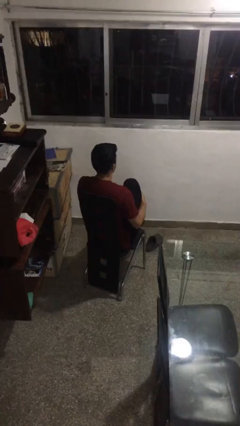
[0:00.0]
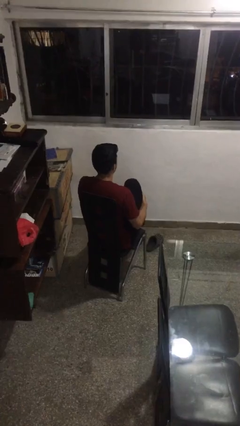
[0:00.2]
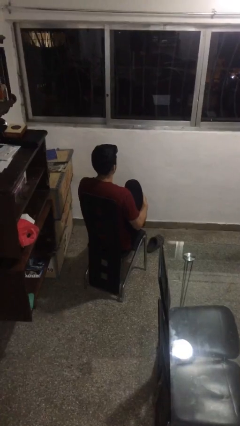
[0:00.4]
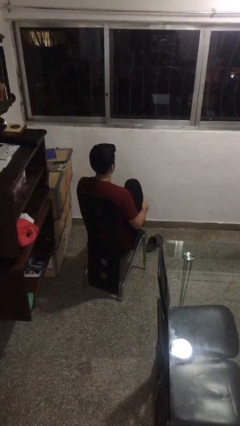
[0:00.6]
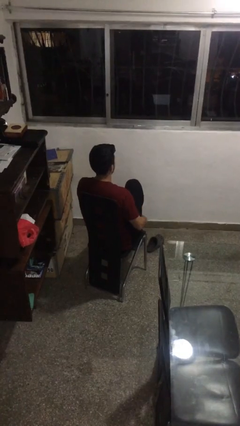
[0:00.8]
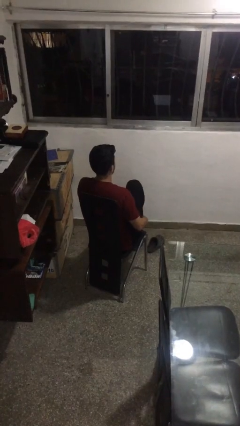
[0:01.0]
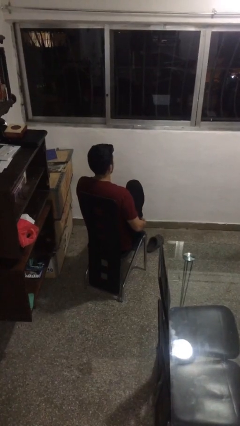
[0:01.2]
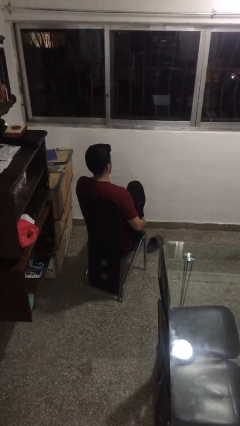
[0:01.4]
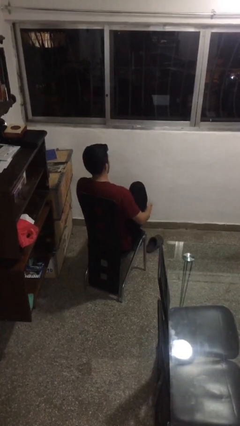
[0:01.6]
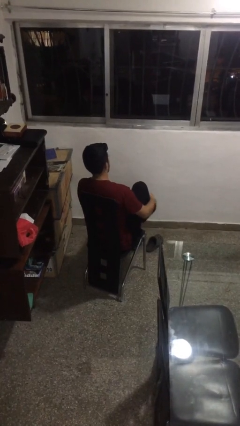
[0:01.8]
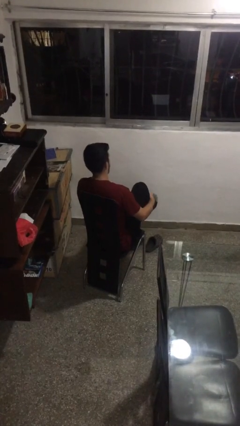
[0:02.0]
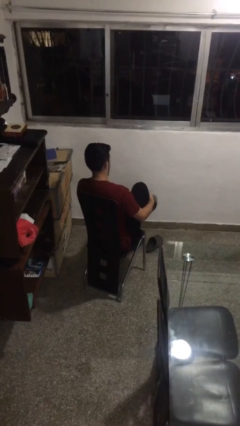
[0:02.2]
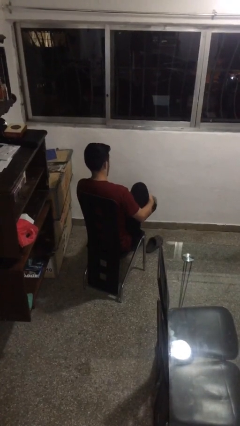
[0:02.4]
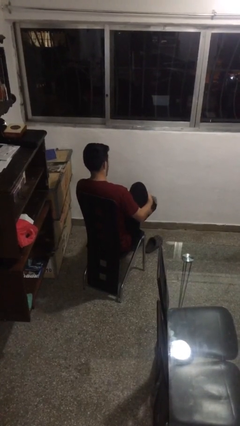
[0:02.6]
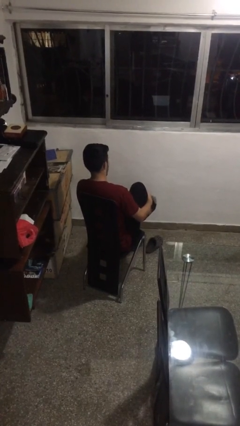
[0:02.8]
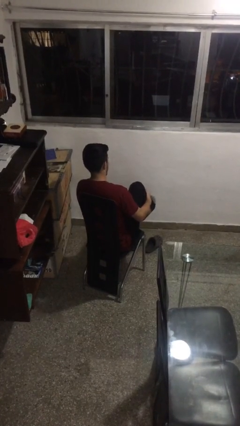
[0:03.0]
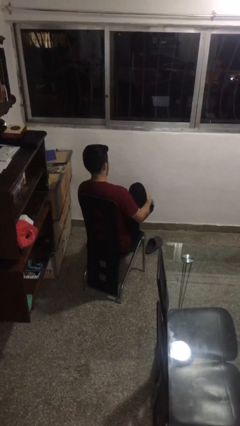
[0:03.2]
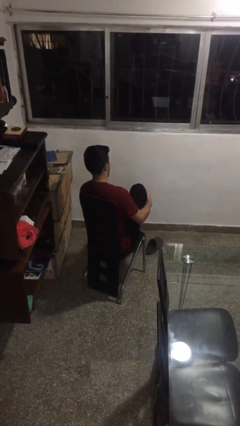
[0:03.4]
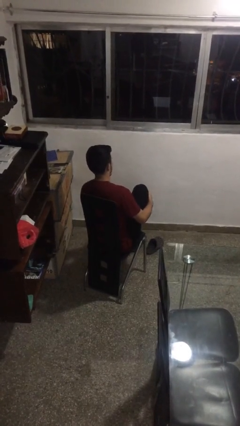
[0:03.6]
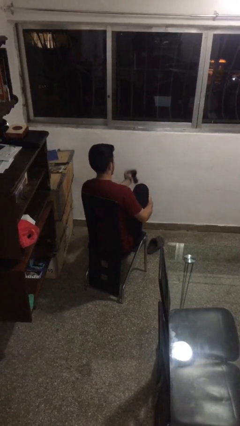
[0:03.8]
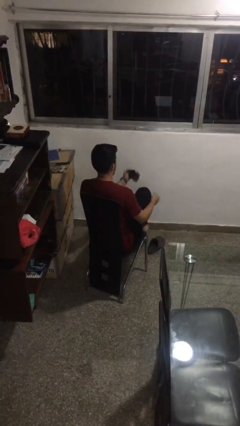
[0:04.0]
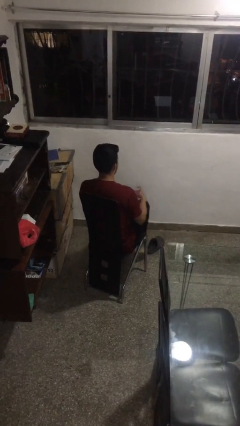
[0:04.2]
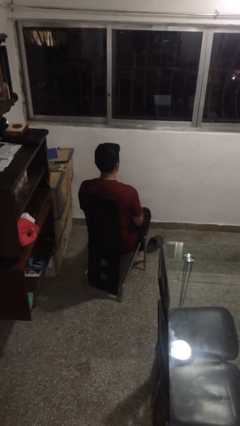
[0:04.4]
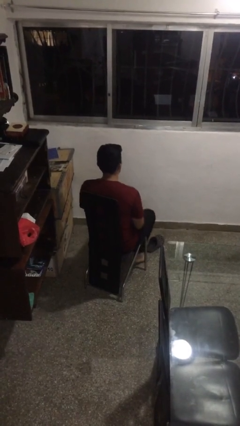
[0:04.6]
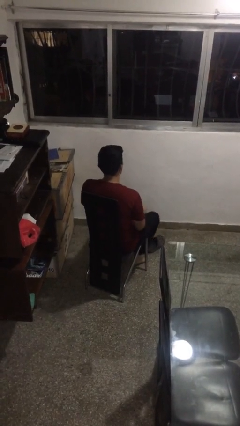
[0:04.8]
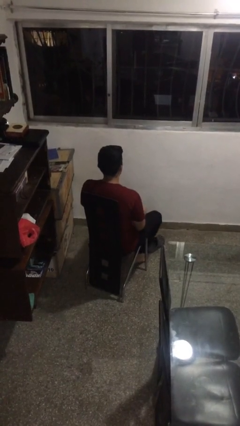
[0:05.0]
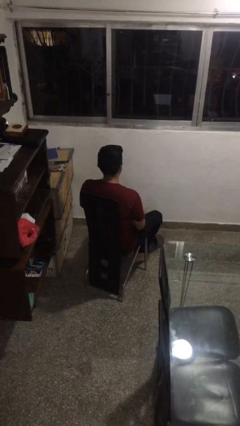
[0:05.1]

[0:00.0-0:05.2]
person takes off socks

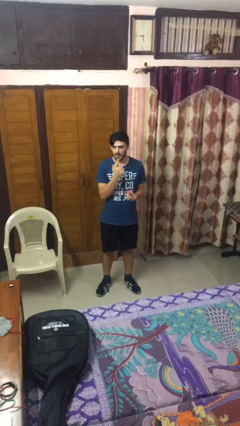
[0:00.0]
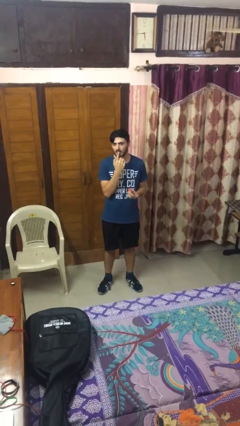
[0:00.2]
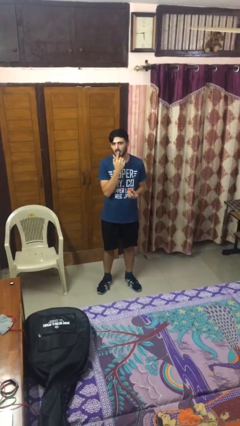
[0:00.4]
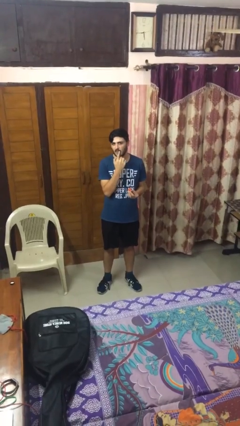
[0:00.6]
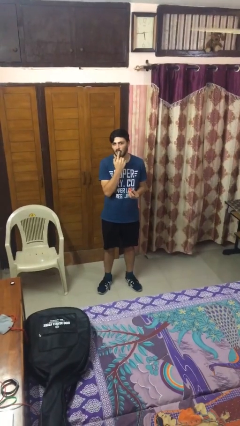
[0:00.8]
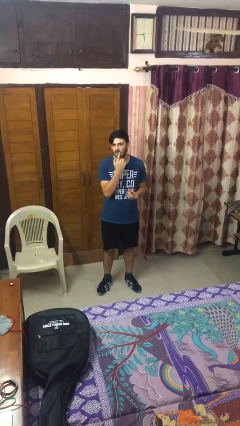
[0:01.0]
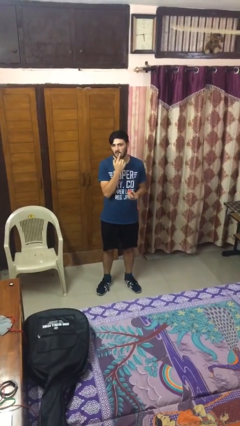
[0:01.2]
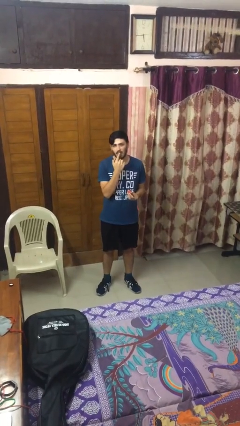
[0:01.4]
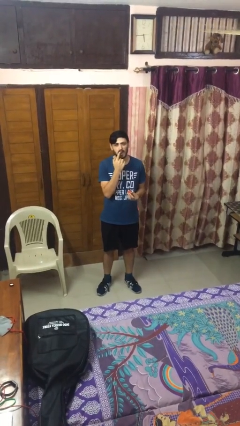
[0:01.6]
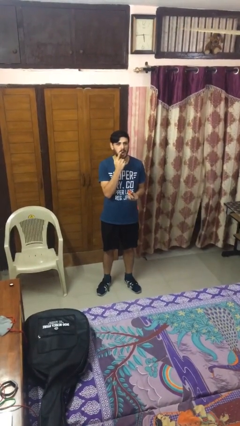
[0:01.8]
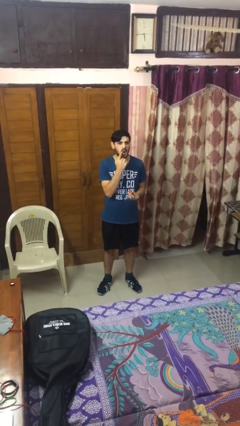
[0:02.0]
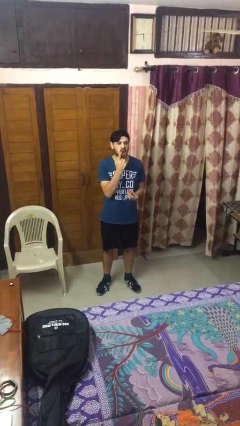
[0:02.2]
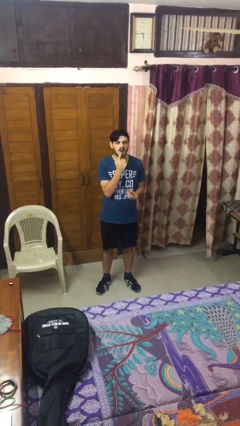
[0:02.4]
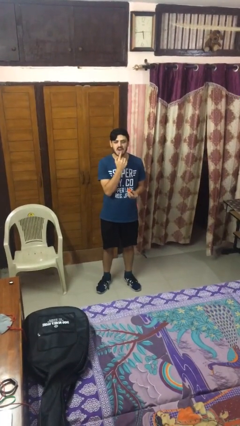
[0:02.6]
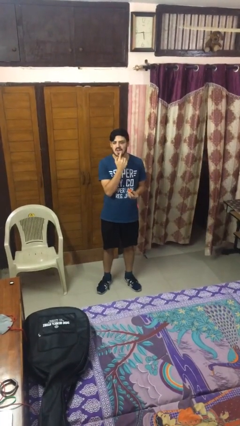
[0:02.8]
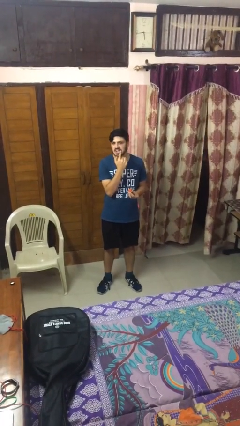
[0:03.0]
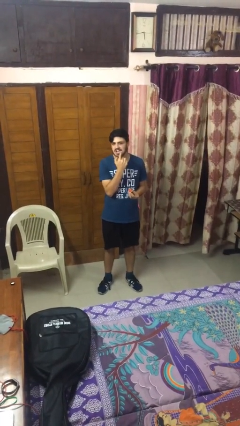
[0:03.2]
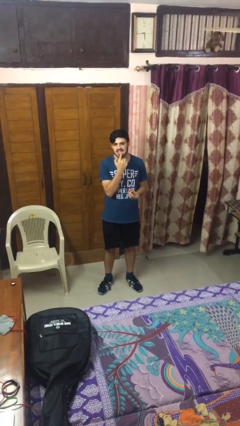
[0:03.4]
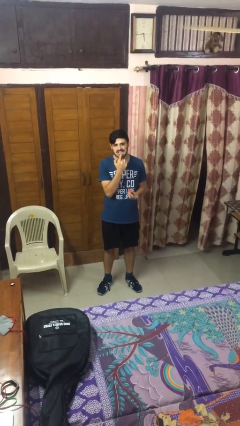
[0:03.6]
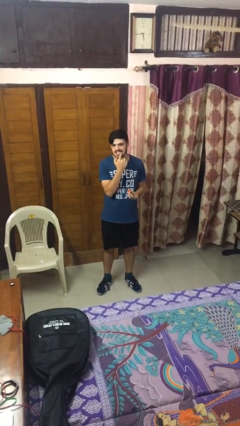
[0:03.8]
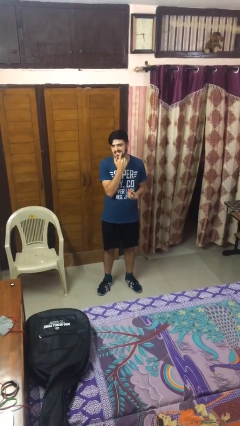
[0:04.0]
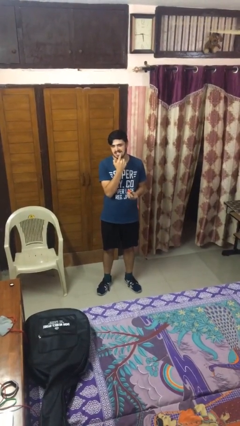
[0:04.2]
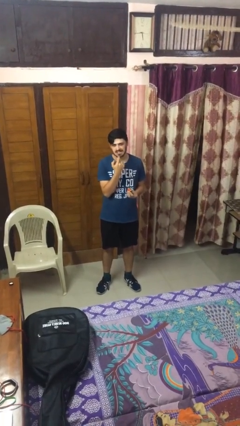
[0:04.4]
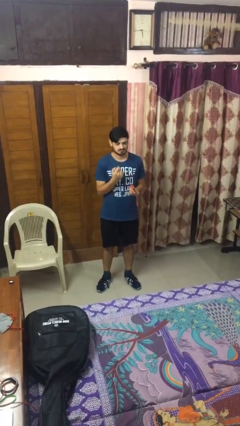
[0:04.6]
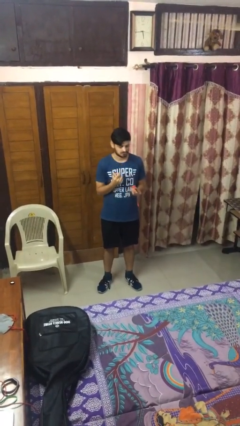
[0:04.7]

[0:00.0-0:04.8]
person applies lip makeup

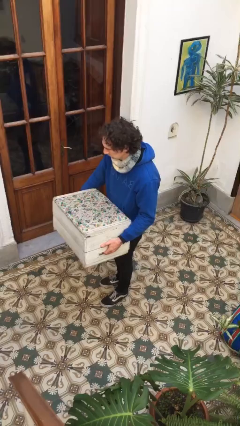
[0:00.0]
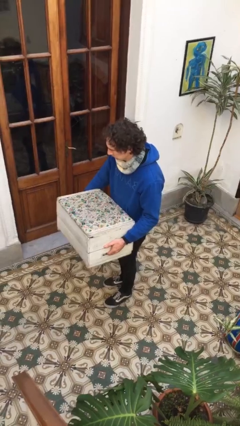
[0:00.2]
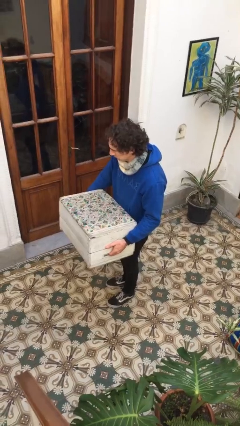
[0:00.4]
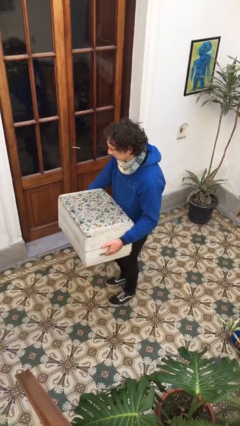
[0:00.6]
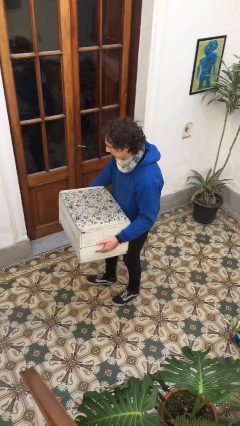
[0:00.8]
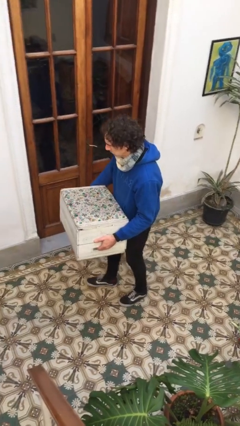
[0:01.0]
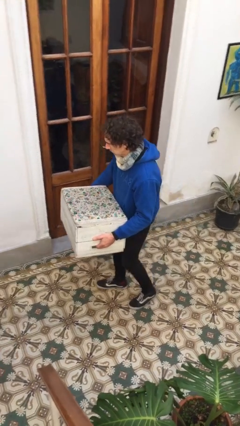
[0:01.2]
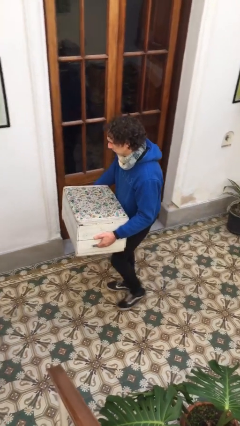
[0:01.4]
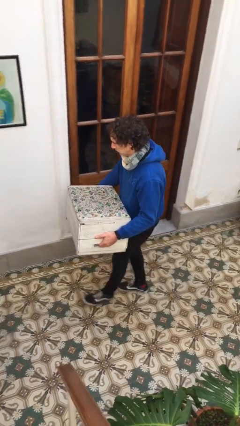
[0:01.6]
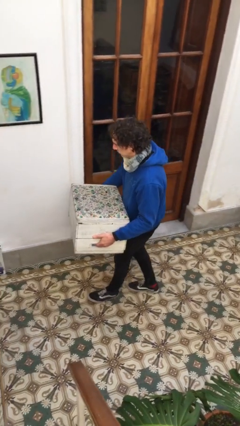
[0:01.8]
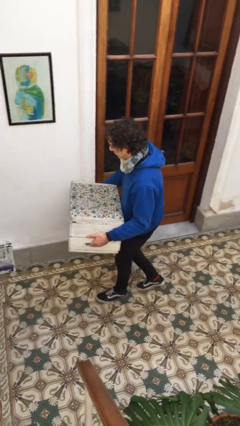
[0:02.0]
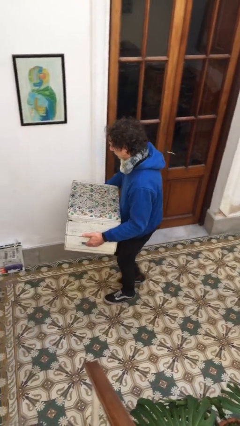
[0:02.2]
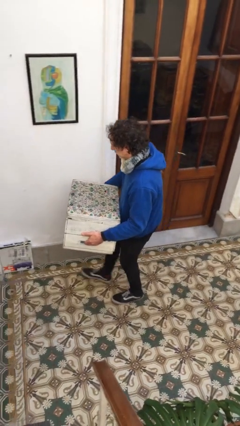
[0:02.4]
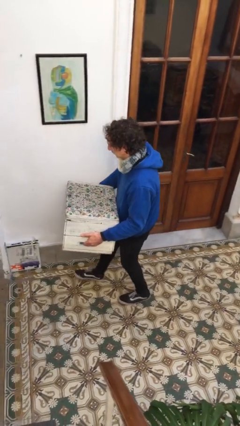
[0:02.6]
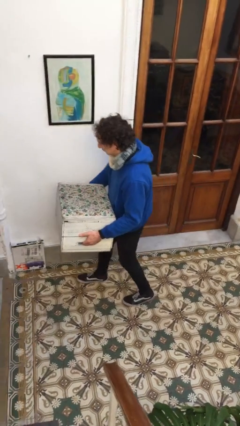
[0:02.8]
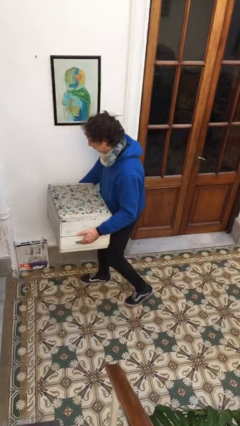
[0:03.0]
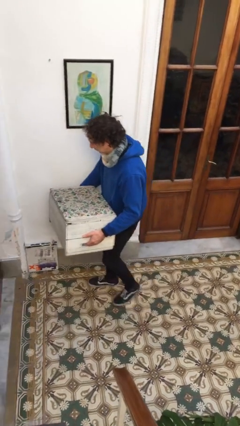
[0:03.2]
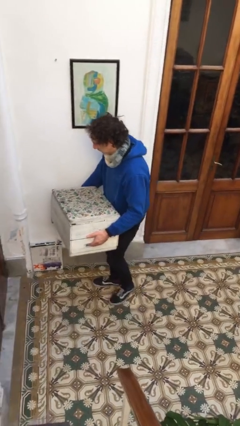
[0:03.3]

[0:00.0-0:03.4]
person carries furniture

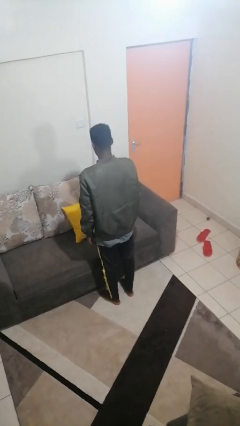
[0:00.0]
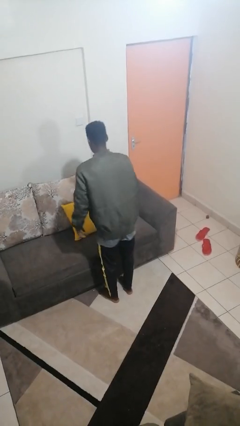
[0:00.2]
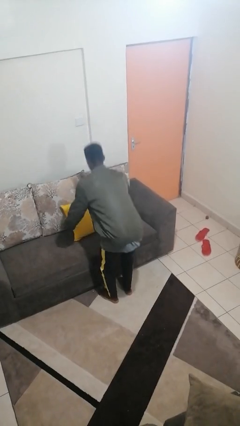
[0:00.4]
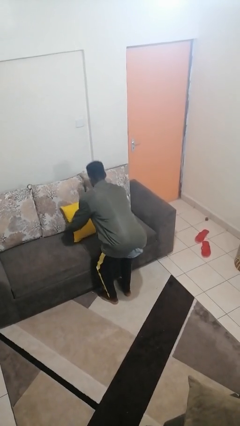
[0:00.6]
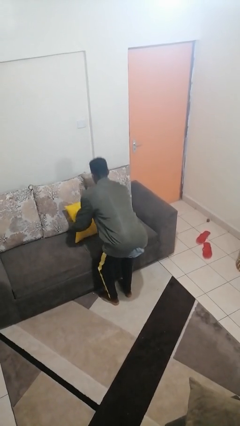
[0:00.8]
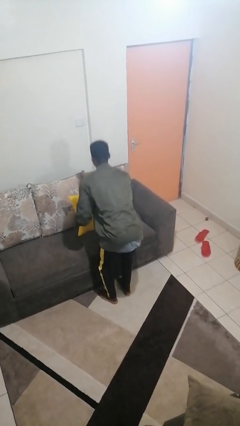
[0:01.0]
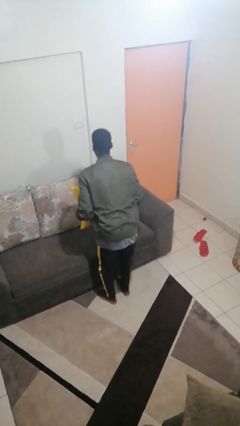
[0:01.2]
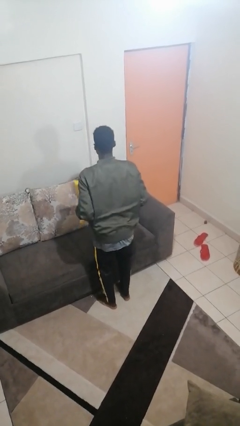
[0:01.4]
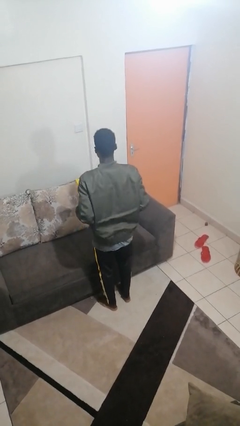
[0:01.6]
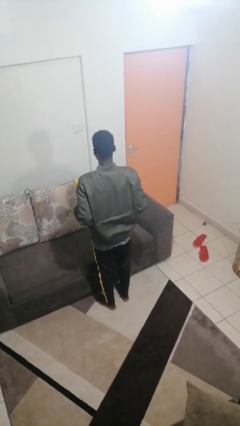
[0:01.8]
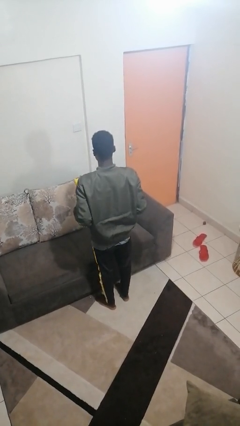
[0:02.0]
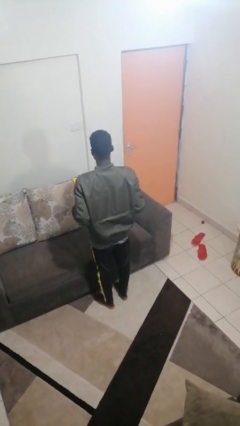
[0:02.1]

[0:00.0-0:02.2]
person picks up object from couch

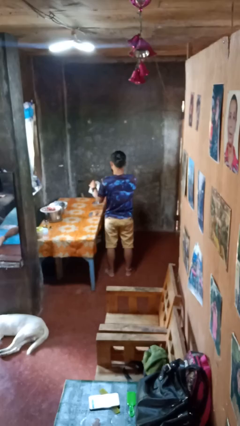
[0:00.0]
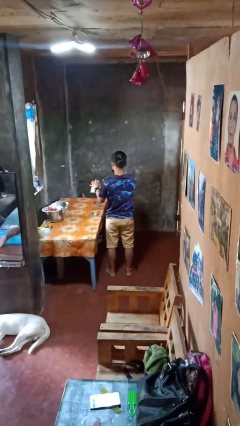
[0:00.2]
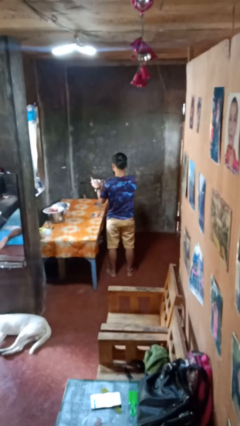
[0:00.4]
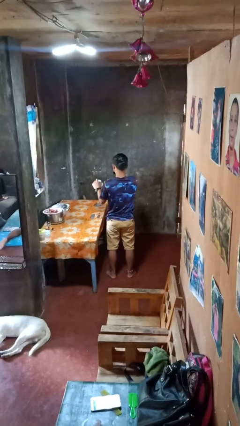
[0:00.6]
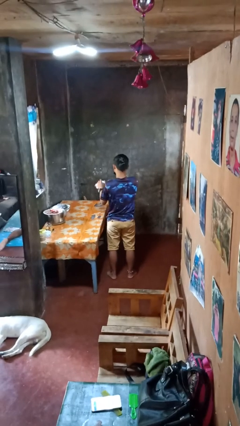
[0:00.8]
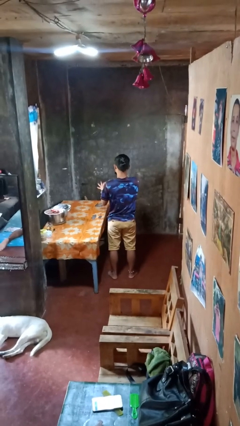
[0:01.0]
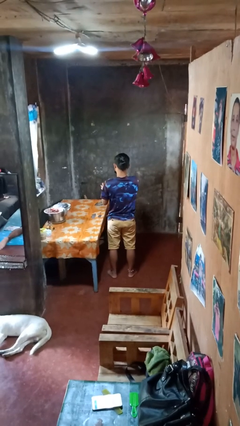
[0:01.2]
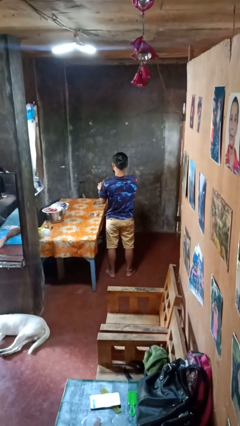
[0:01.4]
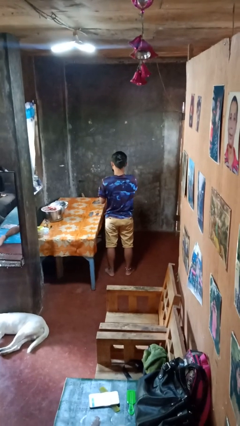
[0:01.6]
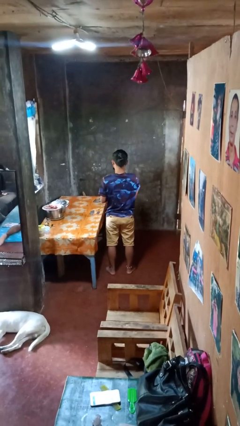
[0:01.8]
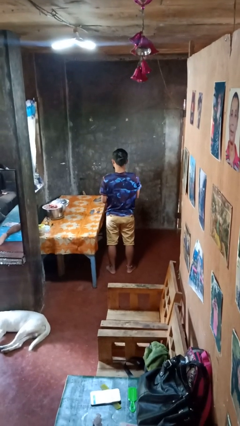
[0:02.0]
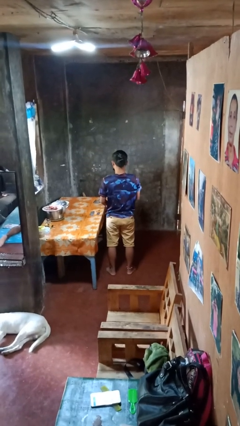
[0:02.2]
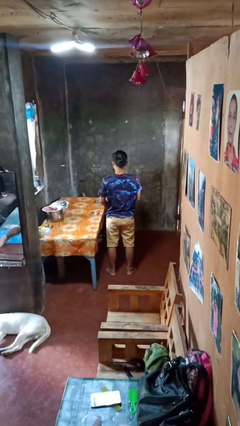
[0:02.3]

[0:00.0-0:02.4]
person crumples paper
